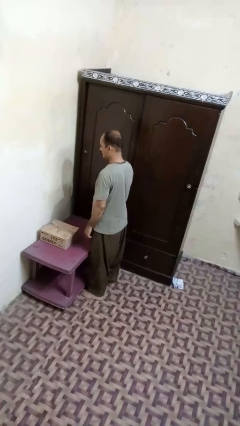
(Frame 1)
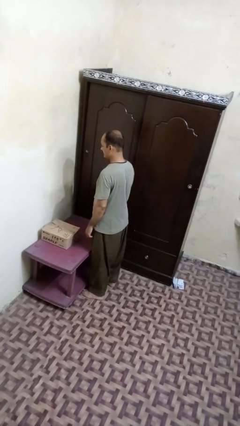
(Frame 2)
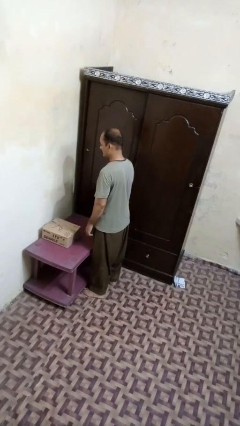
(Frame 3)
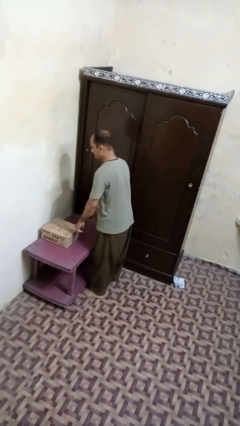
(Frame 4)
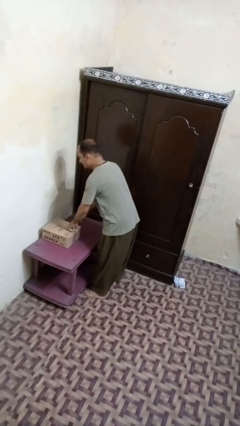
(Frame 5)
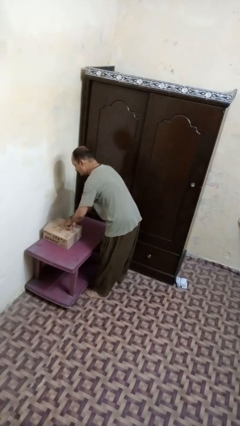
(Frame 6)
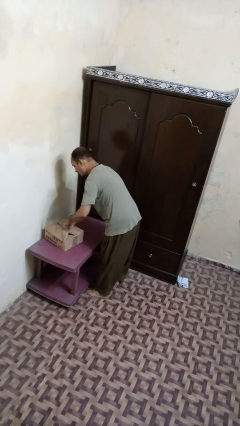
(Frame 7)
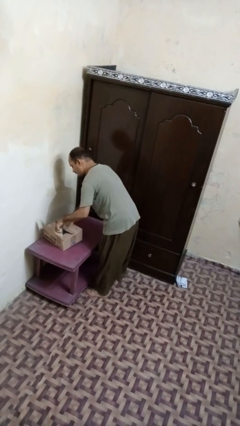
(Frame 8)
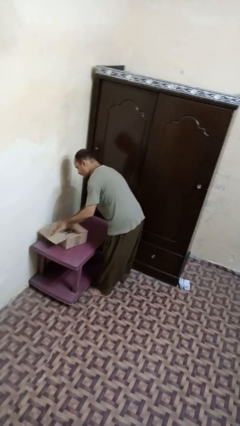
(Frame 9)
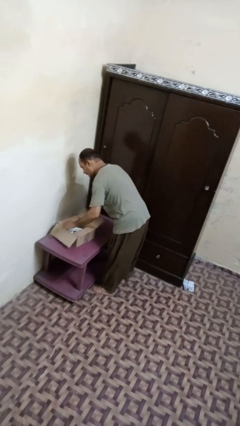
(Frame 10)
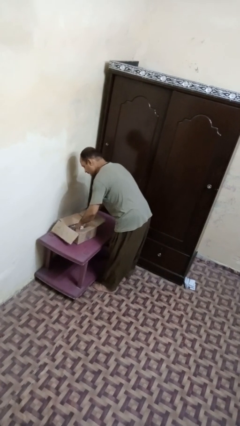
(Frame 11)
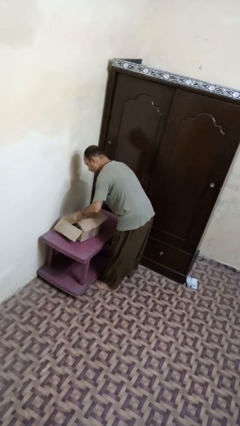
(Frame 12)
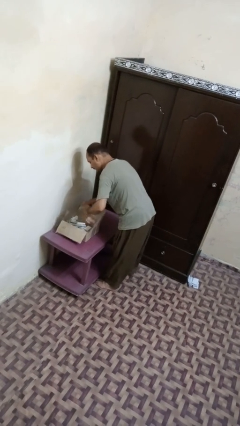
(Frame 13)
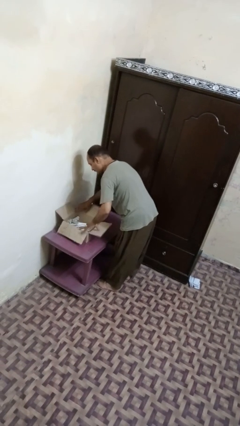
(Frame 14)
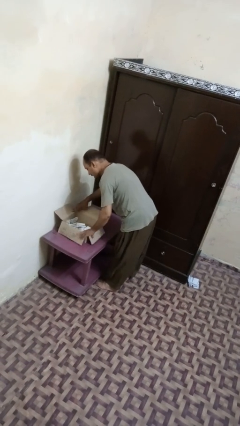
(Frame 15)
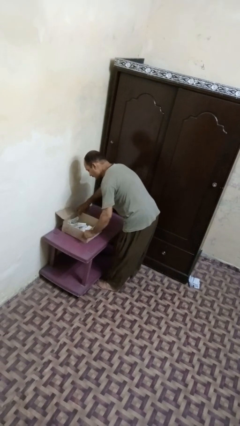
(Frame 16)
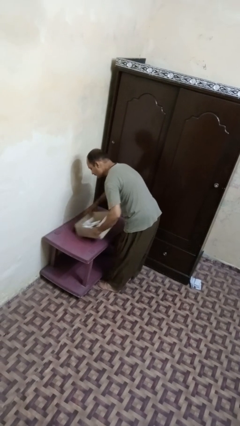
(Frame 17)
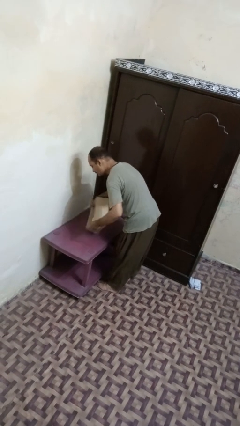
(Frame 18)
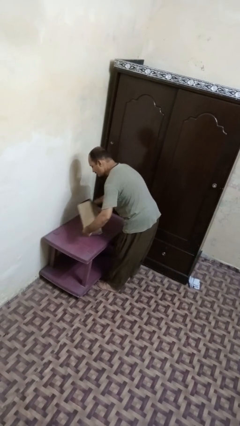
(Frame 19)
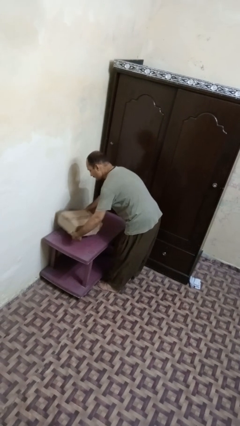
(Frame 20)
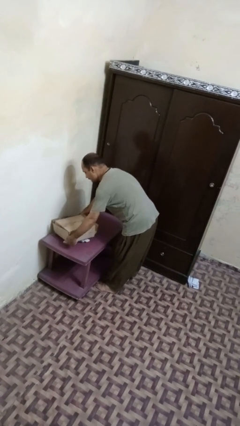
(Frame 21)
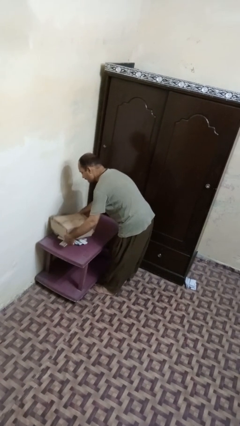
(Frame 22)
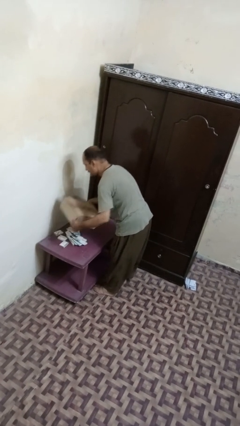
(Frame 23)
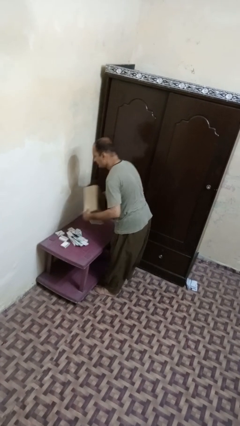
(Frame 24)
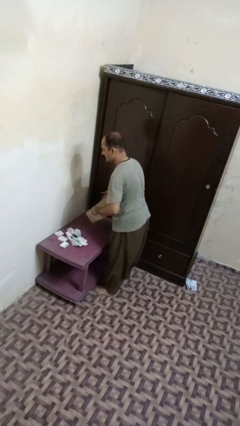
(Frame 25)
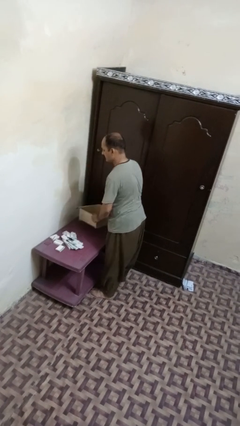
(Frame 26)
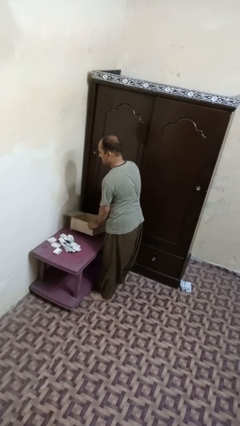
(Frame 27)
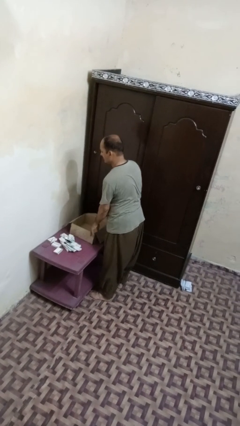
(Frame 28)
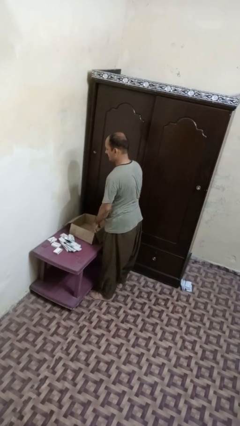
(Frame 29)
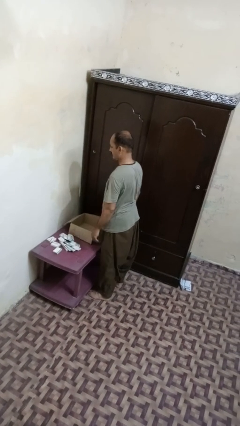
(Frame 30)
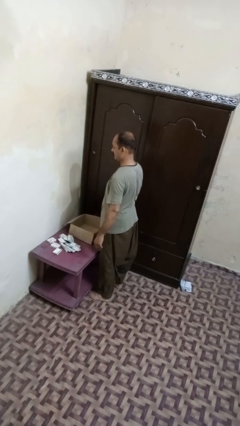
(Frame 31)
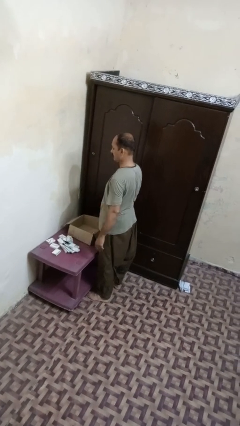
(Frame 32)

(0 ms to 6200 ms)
person unloads box onto table

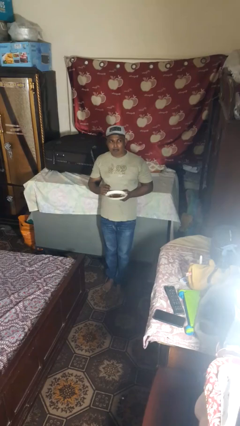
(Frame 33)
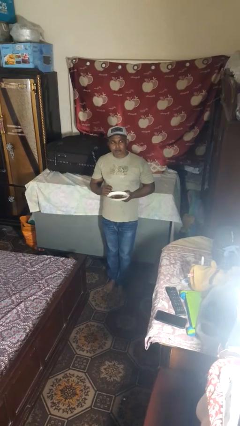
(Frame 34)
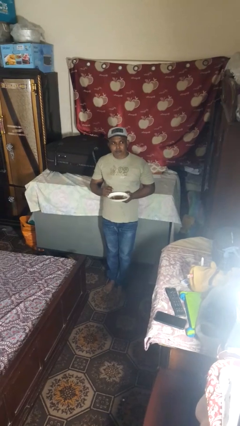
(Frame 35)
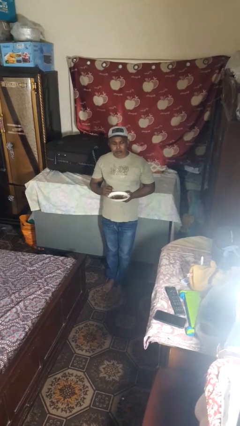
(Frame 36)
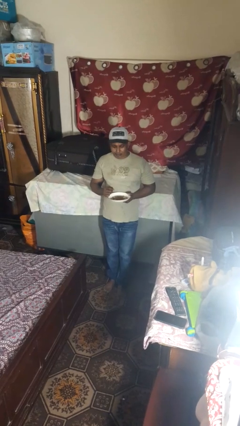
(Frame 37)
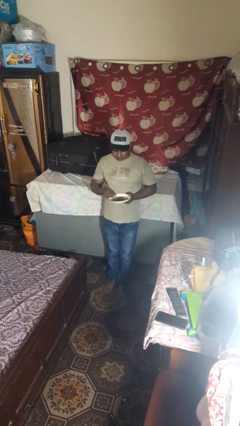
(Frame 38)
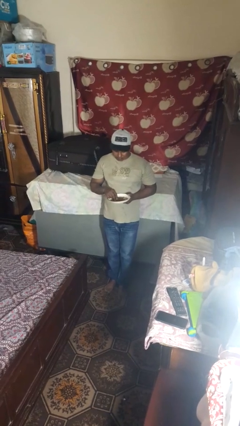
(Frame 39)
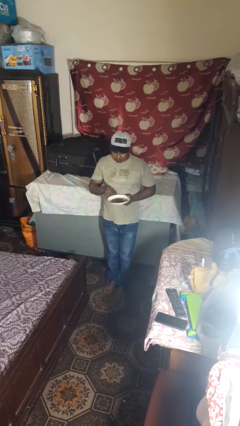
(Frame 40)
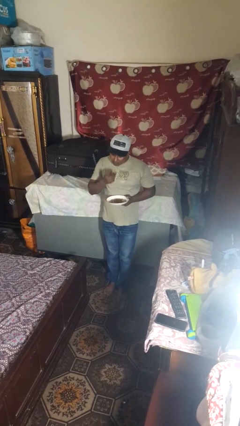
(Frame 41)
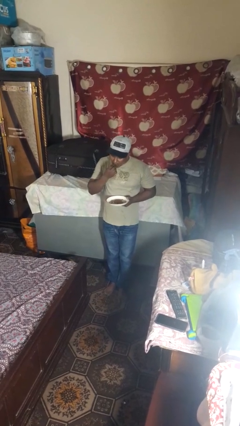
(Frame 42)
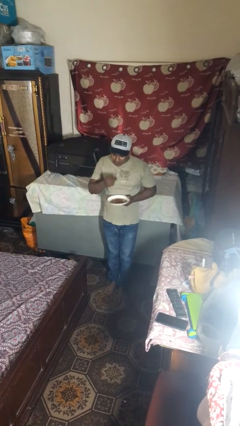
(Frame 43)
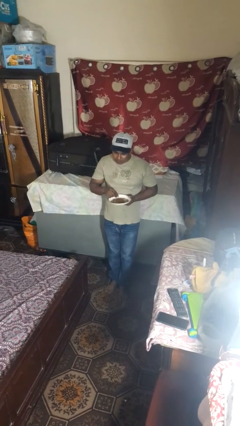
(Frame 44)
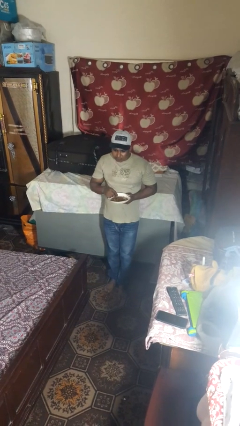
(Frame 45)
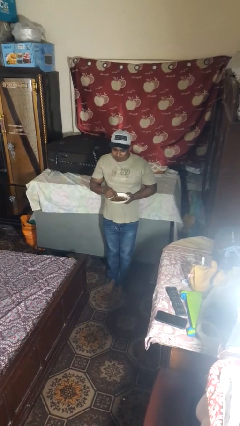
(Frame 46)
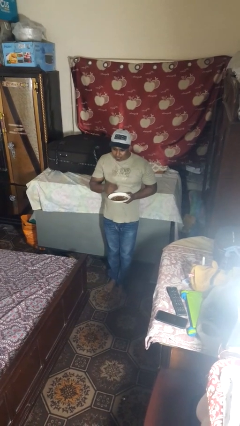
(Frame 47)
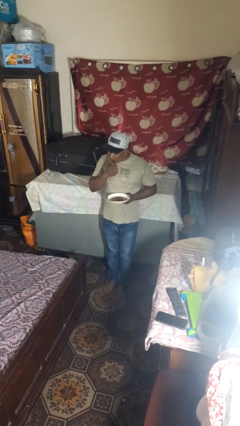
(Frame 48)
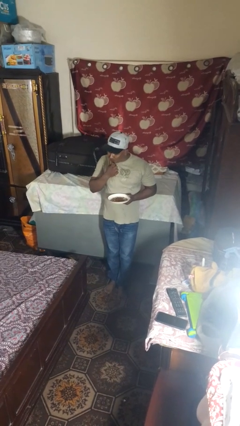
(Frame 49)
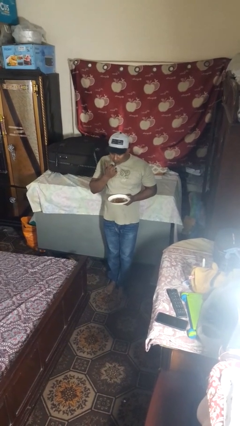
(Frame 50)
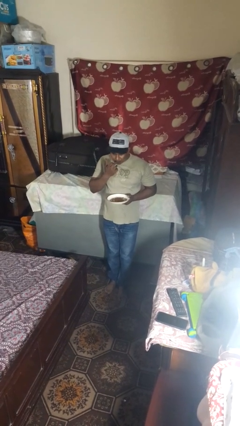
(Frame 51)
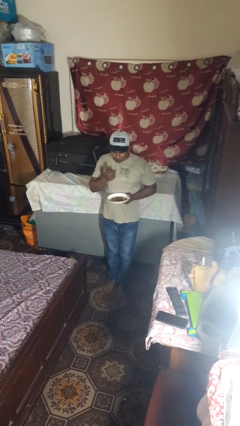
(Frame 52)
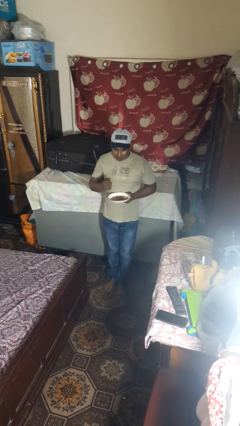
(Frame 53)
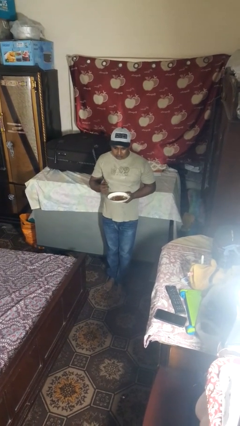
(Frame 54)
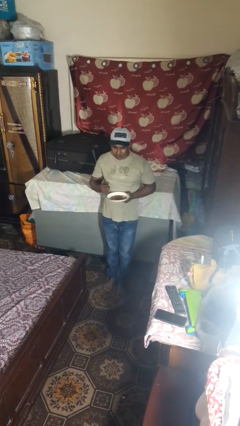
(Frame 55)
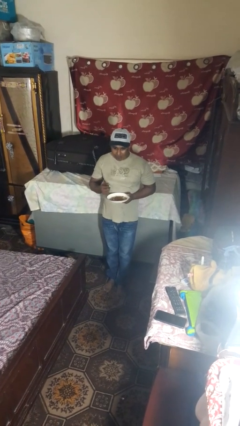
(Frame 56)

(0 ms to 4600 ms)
person licks fingers

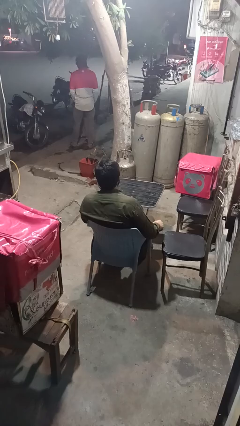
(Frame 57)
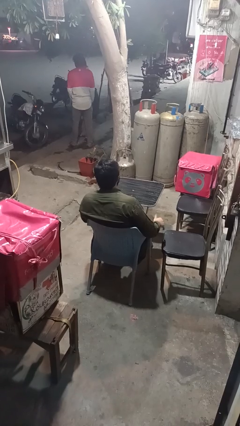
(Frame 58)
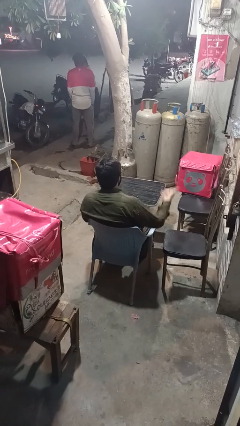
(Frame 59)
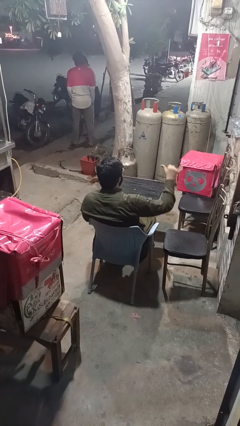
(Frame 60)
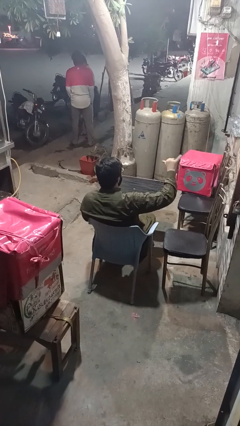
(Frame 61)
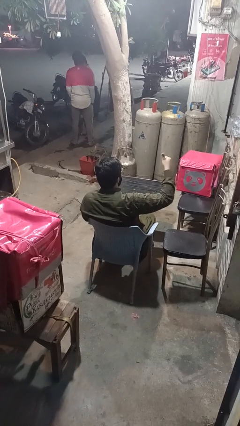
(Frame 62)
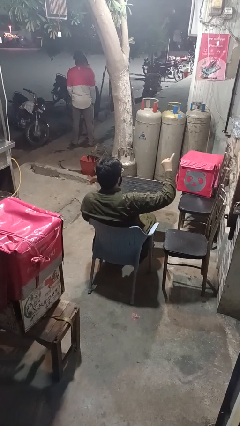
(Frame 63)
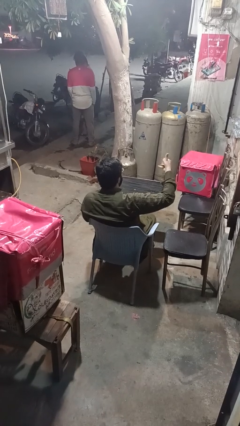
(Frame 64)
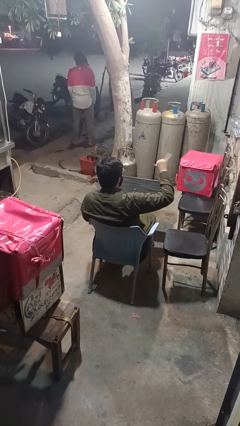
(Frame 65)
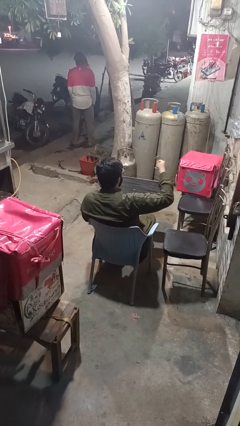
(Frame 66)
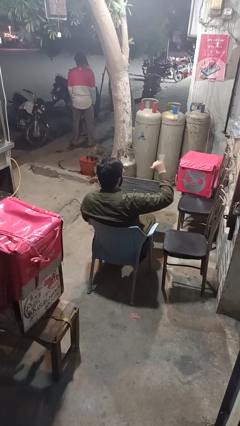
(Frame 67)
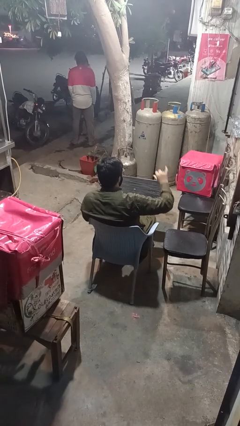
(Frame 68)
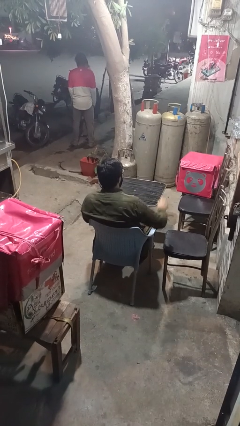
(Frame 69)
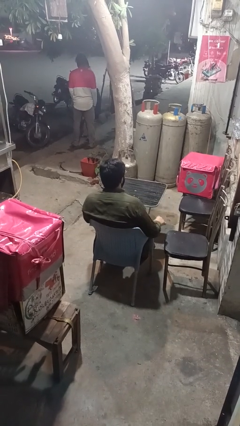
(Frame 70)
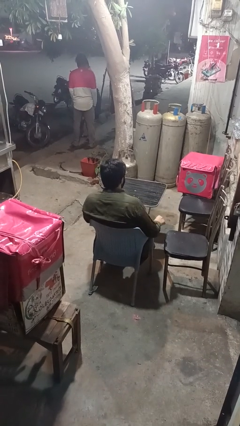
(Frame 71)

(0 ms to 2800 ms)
person gestures hang loose

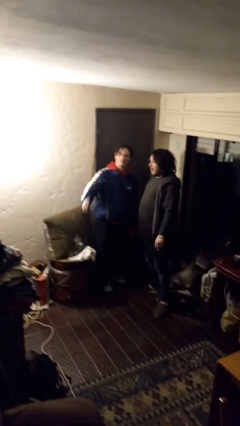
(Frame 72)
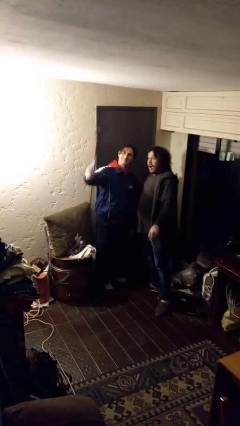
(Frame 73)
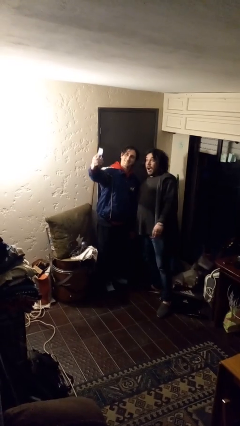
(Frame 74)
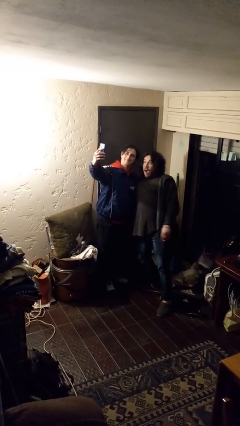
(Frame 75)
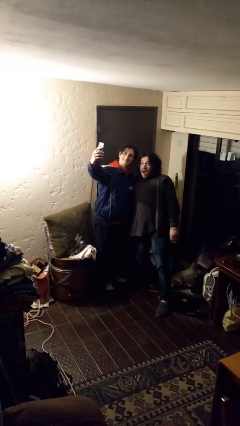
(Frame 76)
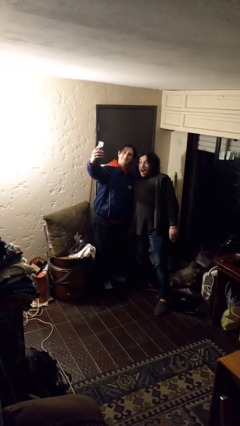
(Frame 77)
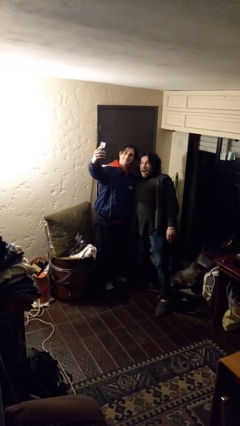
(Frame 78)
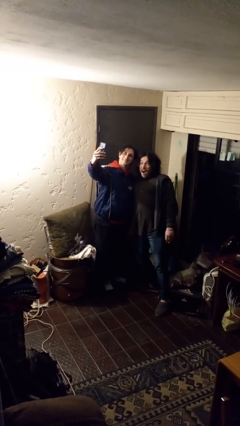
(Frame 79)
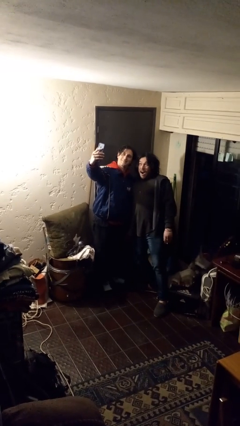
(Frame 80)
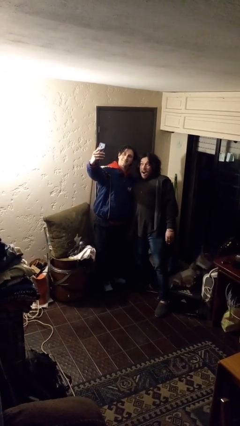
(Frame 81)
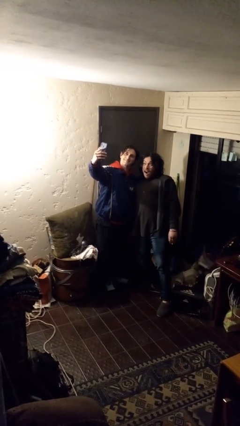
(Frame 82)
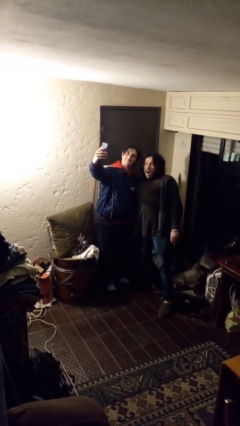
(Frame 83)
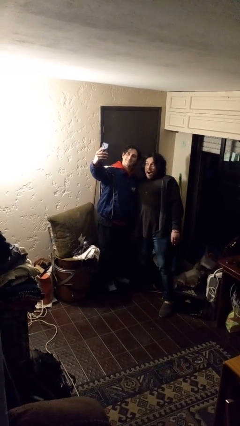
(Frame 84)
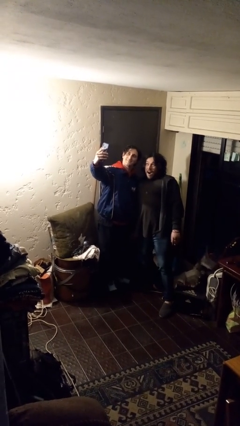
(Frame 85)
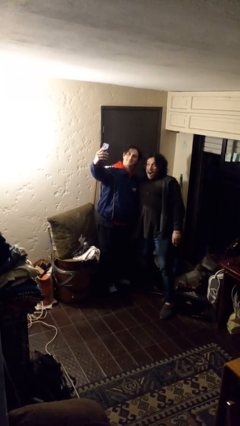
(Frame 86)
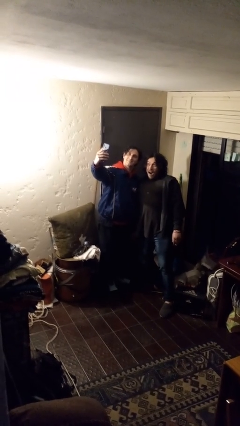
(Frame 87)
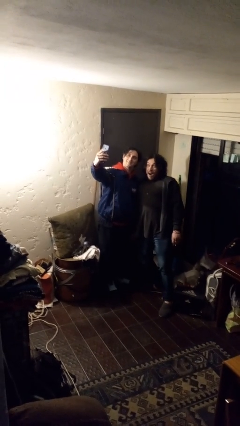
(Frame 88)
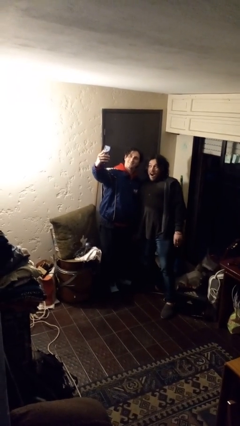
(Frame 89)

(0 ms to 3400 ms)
person takes selfie with person

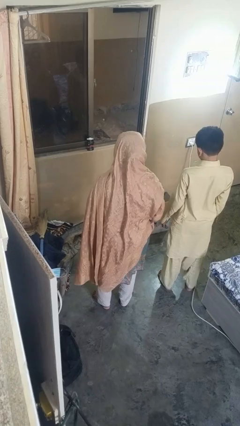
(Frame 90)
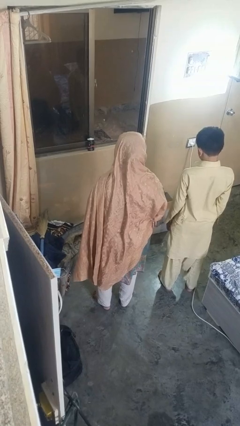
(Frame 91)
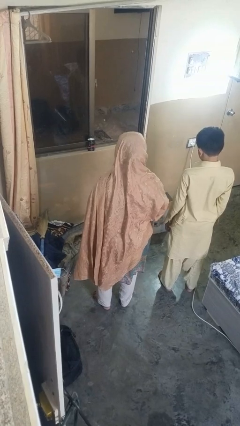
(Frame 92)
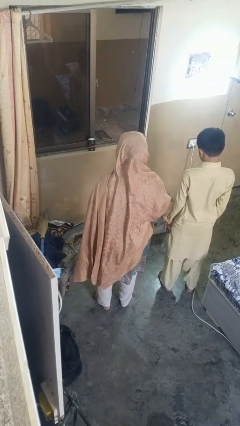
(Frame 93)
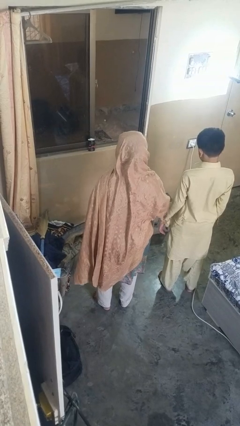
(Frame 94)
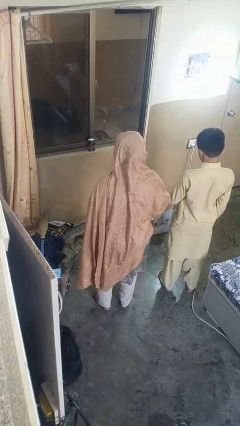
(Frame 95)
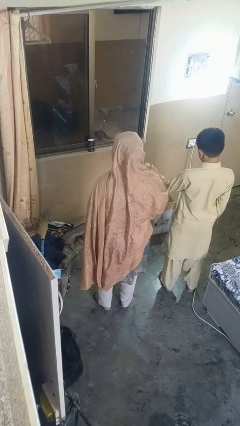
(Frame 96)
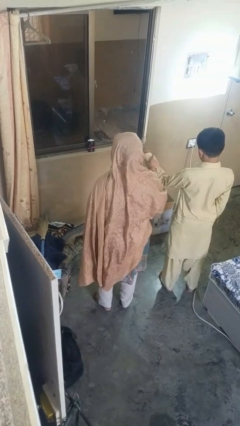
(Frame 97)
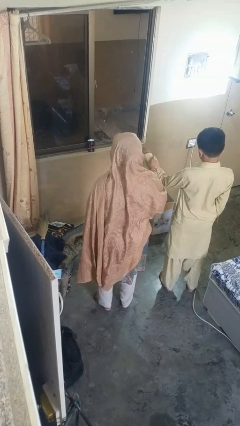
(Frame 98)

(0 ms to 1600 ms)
person grabs person by forearm
